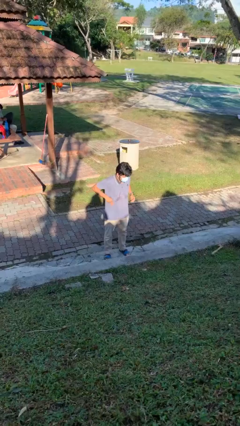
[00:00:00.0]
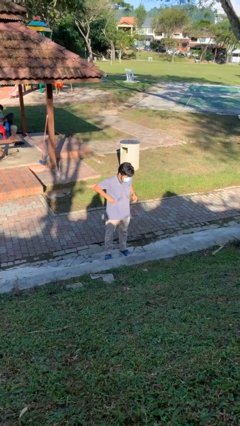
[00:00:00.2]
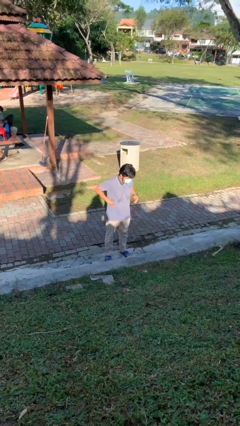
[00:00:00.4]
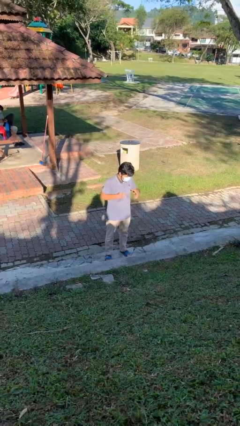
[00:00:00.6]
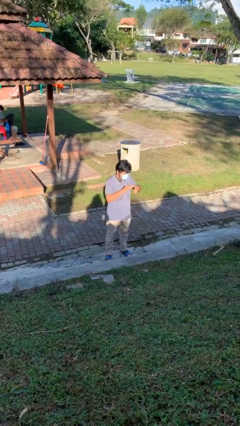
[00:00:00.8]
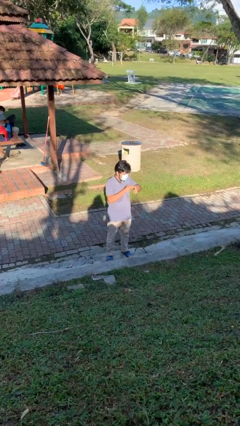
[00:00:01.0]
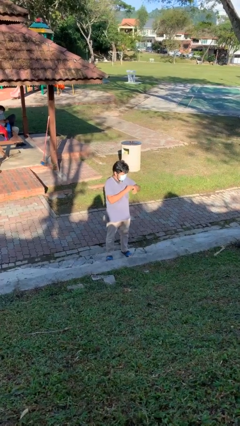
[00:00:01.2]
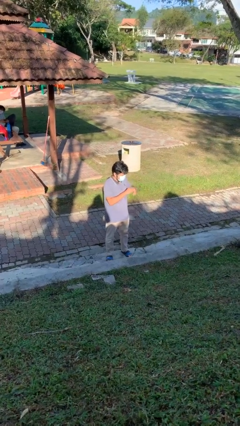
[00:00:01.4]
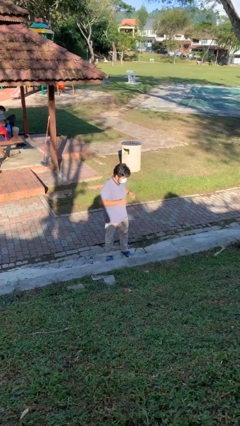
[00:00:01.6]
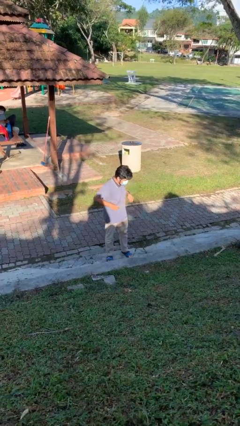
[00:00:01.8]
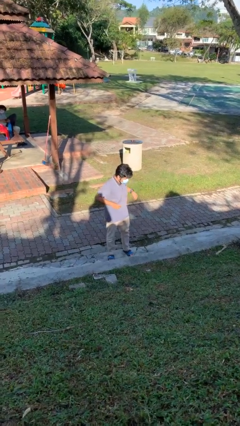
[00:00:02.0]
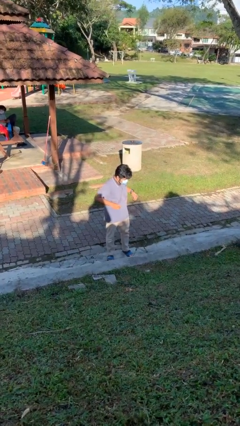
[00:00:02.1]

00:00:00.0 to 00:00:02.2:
person puts on ring

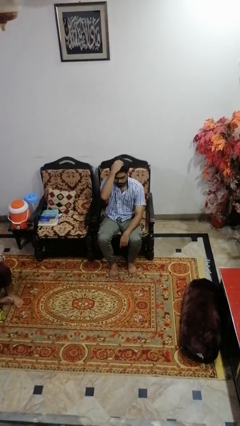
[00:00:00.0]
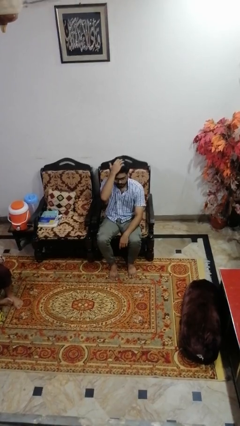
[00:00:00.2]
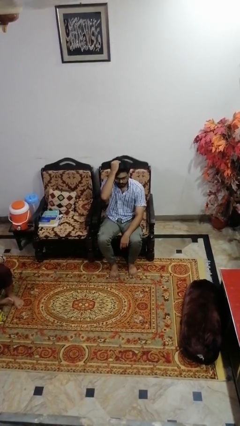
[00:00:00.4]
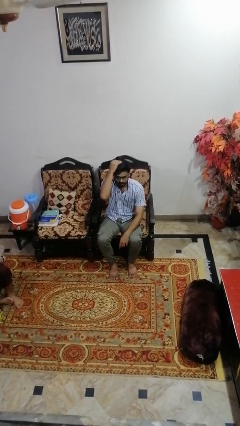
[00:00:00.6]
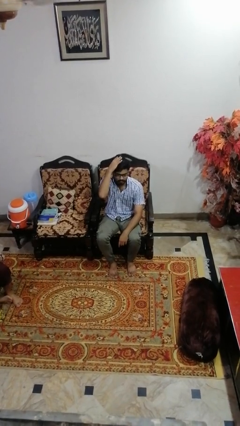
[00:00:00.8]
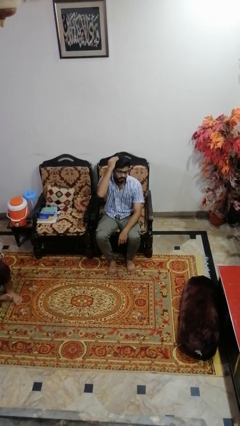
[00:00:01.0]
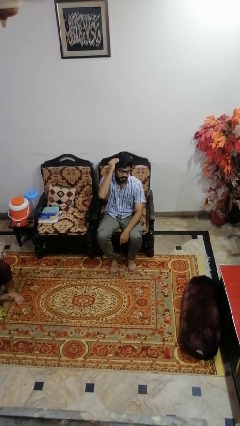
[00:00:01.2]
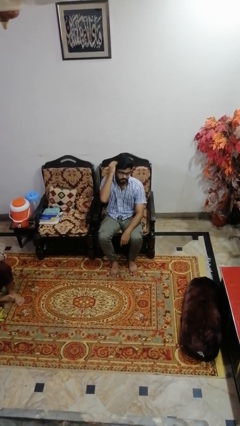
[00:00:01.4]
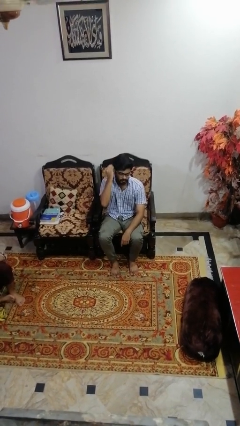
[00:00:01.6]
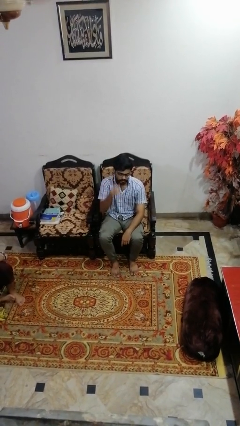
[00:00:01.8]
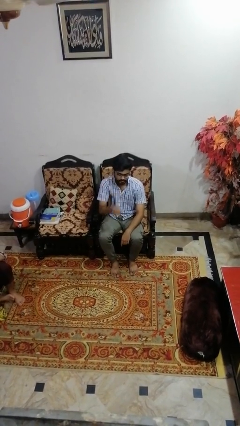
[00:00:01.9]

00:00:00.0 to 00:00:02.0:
person scratches face

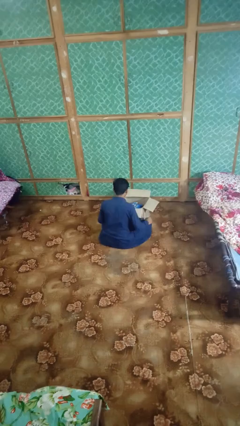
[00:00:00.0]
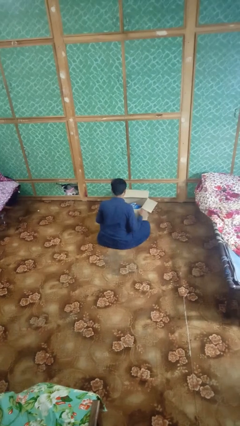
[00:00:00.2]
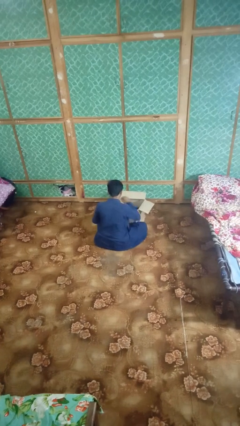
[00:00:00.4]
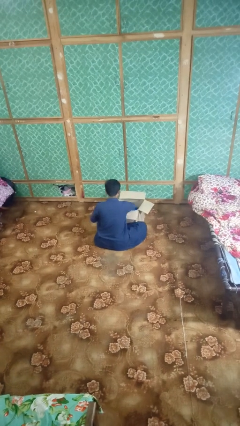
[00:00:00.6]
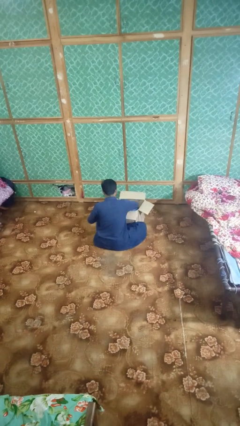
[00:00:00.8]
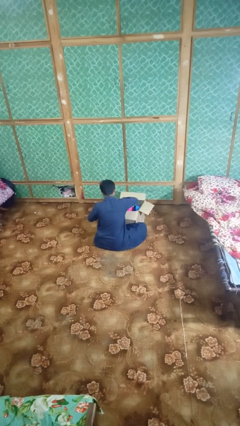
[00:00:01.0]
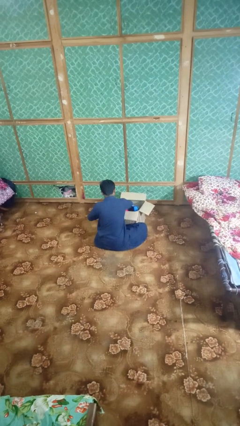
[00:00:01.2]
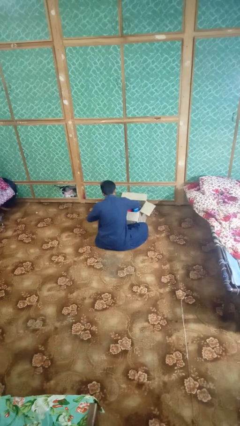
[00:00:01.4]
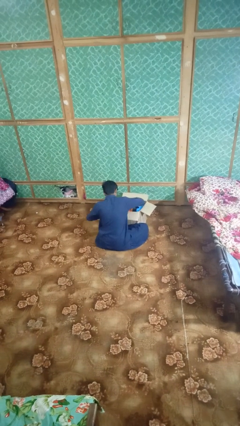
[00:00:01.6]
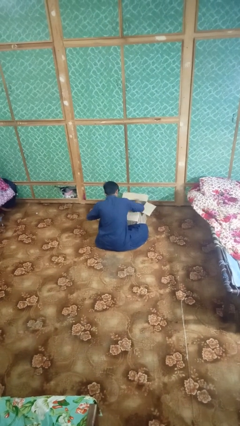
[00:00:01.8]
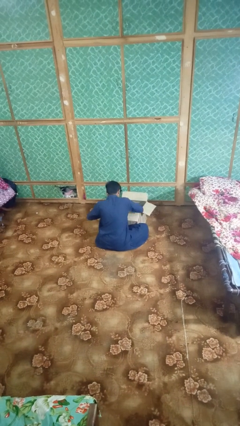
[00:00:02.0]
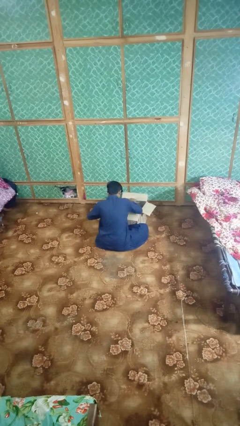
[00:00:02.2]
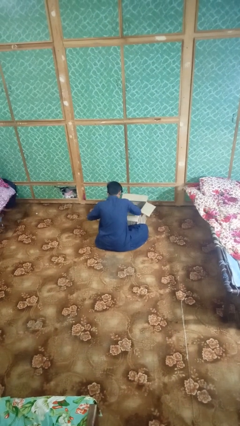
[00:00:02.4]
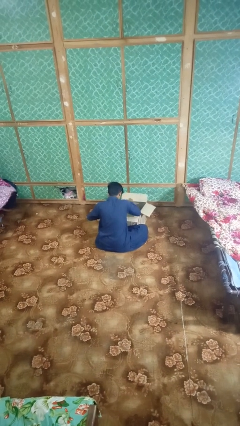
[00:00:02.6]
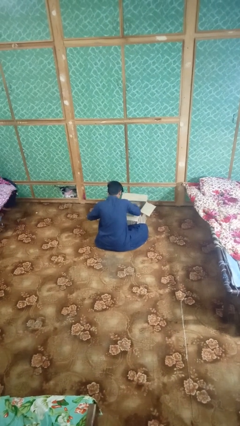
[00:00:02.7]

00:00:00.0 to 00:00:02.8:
person searches in box

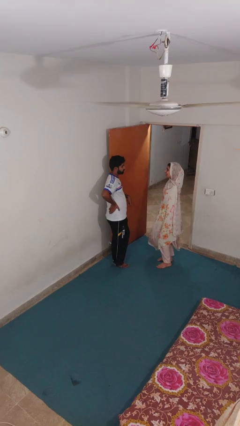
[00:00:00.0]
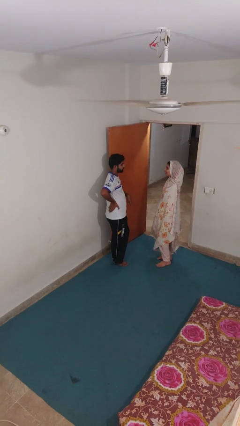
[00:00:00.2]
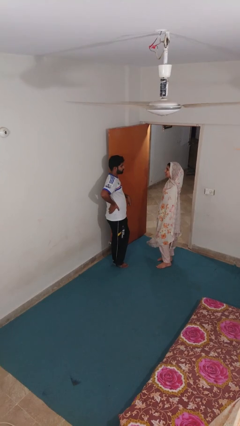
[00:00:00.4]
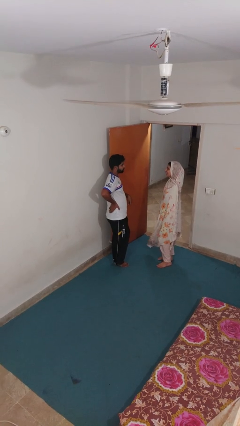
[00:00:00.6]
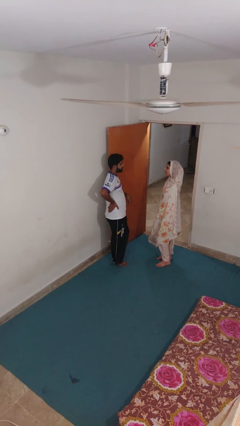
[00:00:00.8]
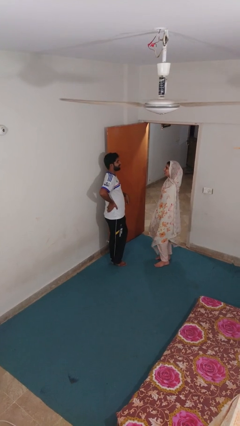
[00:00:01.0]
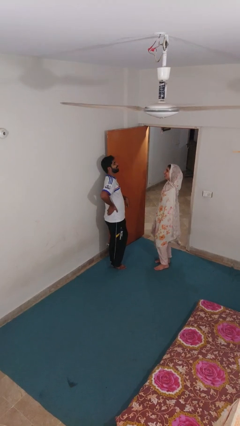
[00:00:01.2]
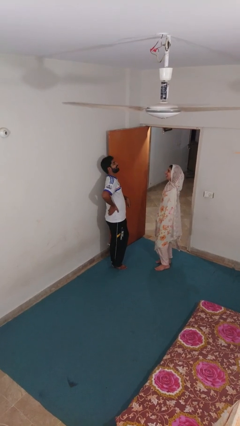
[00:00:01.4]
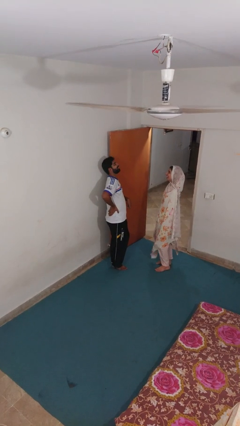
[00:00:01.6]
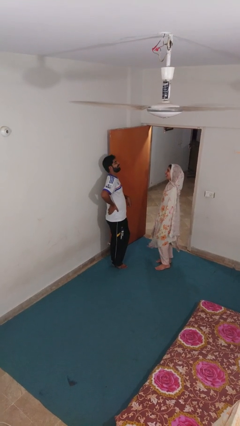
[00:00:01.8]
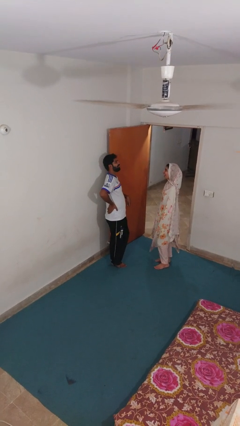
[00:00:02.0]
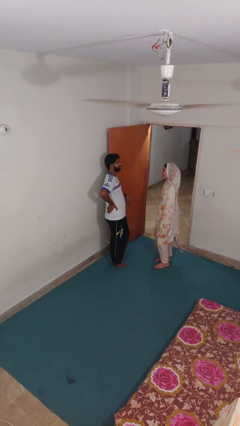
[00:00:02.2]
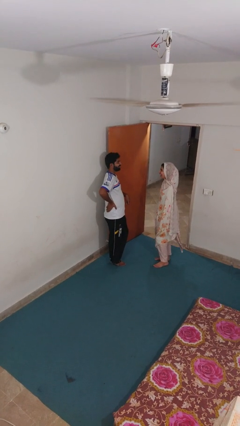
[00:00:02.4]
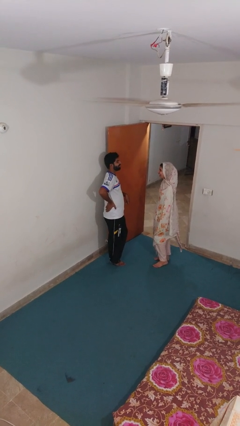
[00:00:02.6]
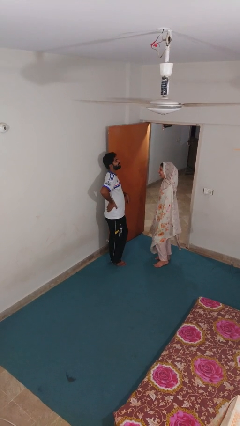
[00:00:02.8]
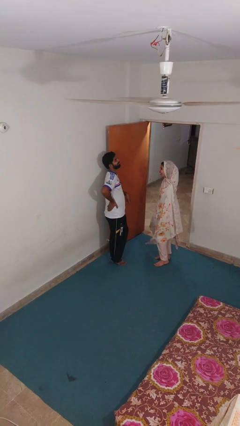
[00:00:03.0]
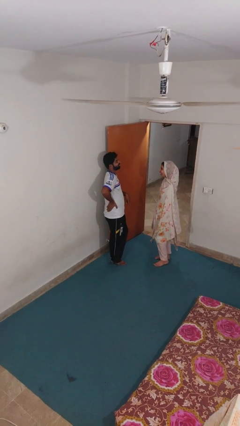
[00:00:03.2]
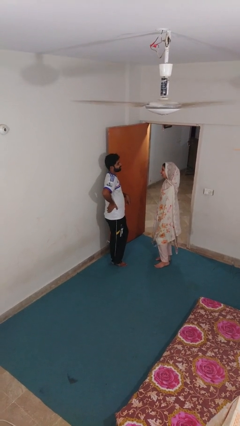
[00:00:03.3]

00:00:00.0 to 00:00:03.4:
person laughs with person

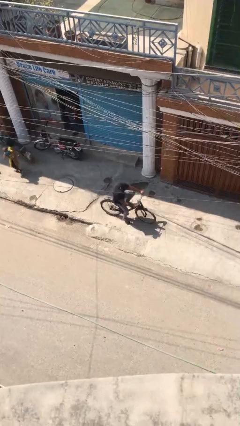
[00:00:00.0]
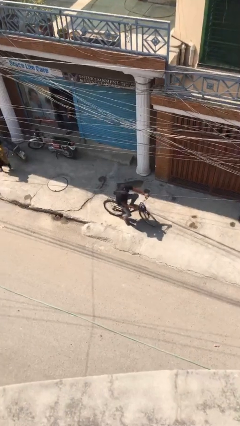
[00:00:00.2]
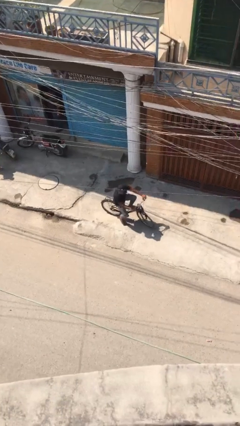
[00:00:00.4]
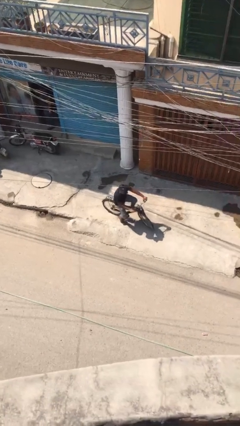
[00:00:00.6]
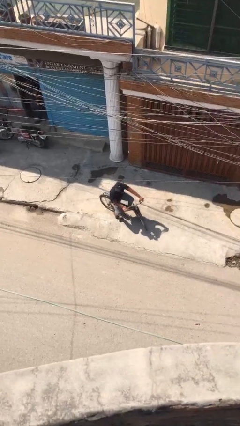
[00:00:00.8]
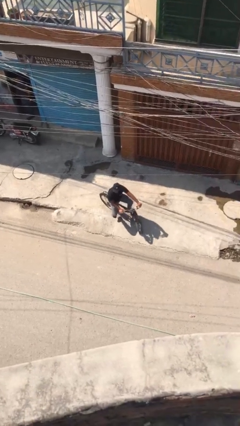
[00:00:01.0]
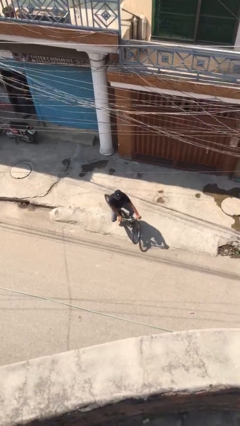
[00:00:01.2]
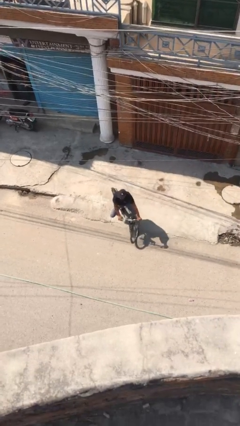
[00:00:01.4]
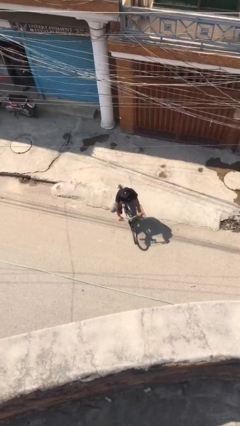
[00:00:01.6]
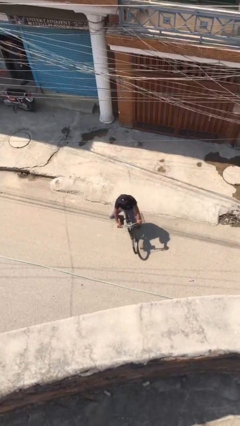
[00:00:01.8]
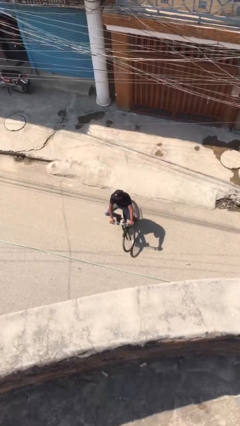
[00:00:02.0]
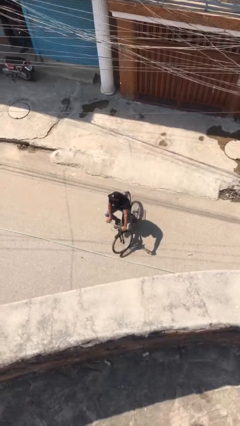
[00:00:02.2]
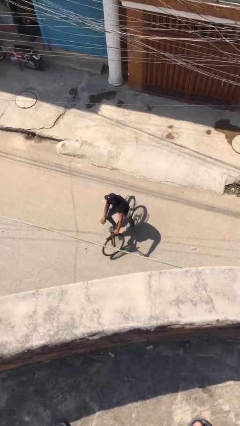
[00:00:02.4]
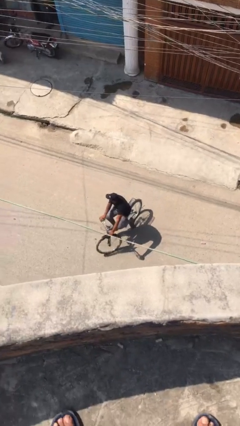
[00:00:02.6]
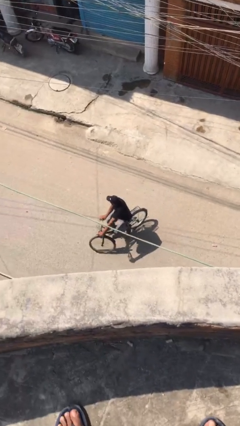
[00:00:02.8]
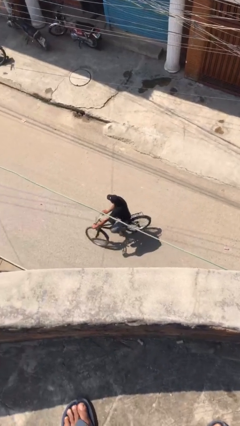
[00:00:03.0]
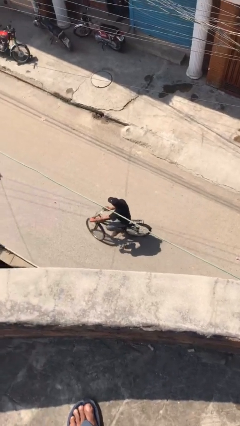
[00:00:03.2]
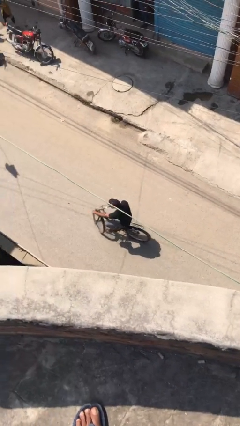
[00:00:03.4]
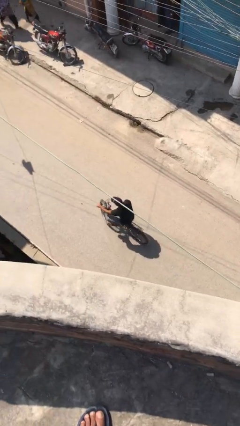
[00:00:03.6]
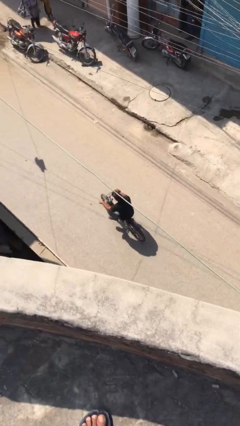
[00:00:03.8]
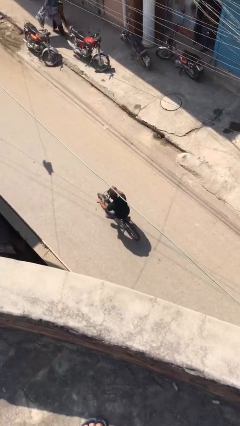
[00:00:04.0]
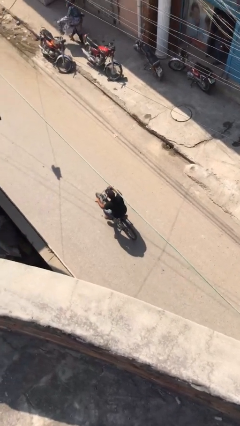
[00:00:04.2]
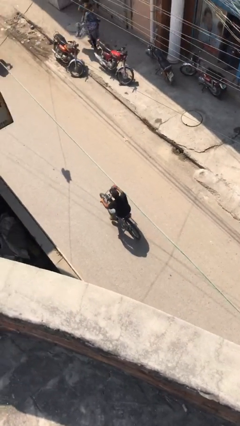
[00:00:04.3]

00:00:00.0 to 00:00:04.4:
person rides bicycle

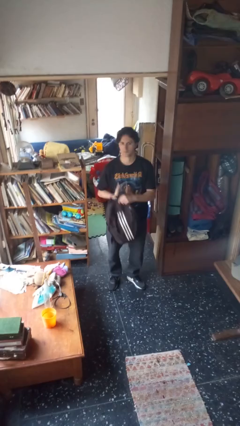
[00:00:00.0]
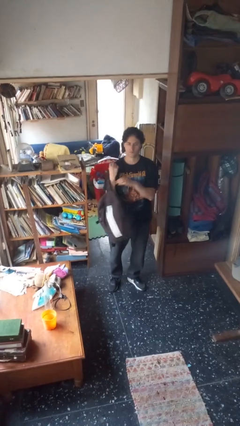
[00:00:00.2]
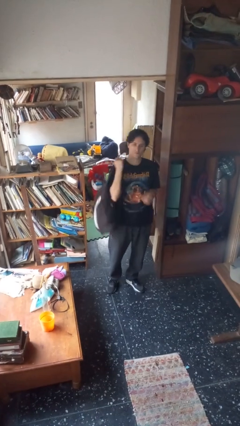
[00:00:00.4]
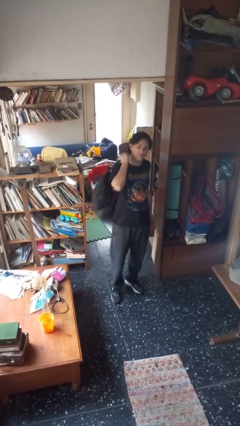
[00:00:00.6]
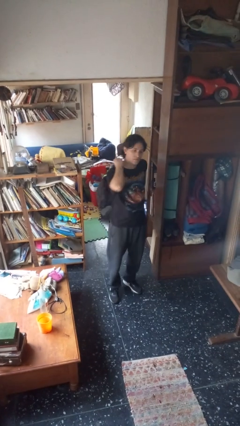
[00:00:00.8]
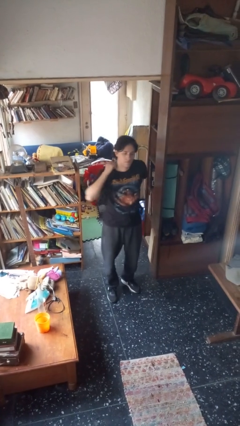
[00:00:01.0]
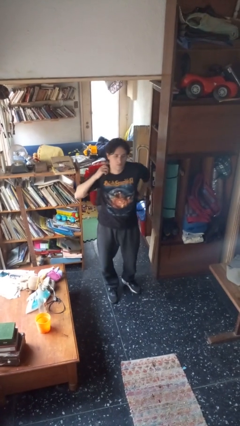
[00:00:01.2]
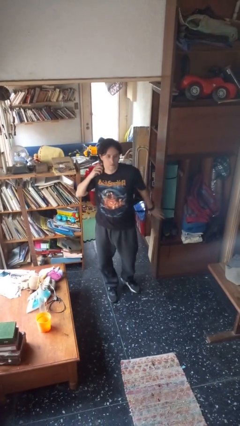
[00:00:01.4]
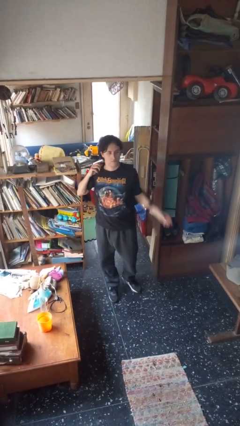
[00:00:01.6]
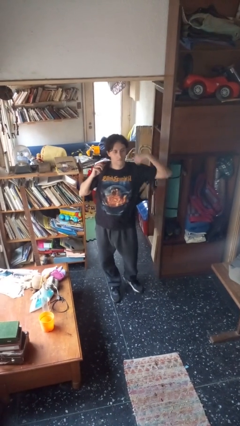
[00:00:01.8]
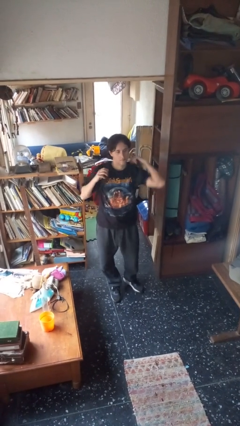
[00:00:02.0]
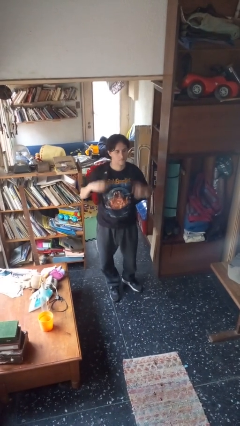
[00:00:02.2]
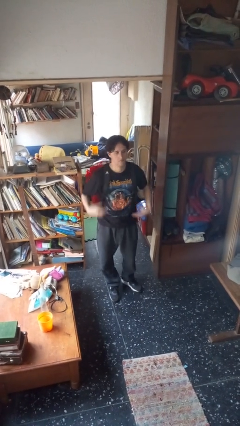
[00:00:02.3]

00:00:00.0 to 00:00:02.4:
person puts on backpack
